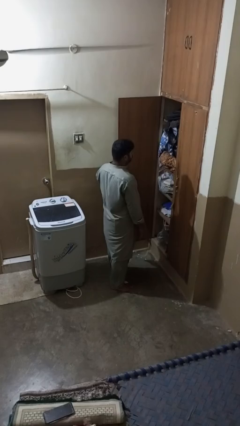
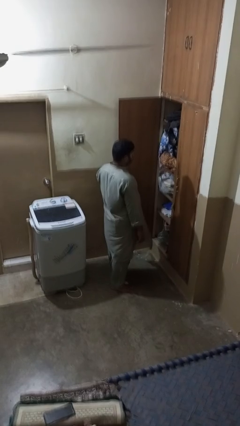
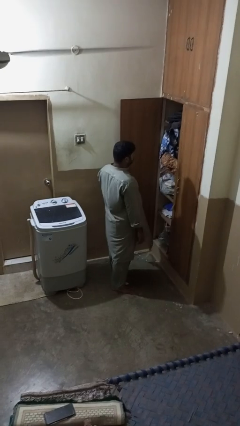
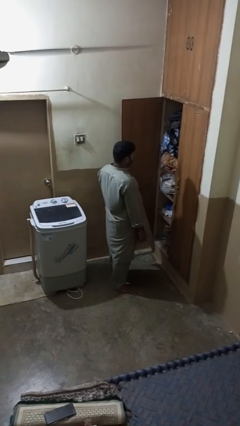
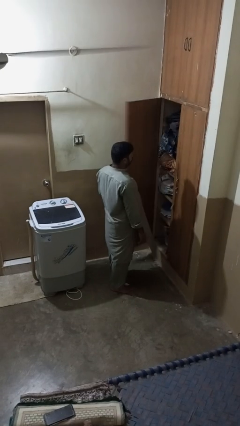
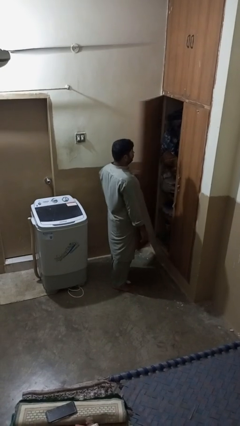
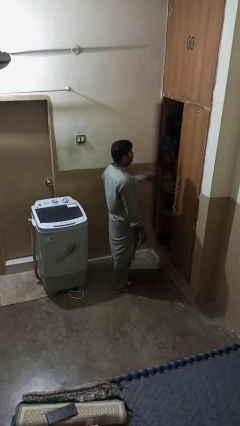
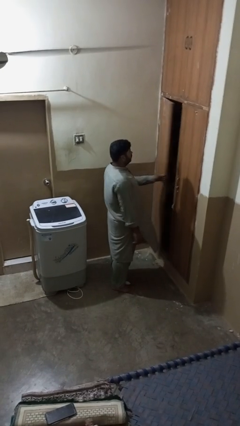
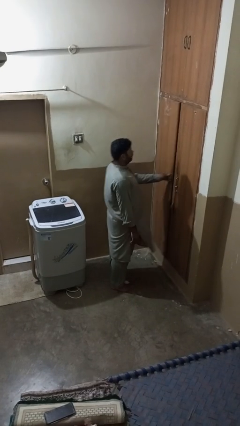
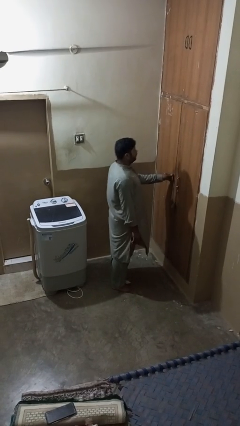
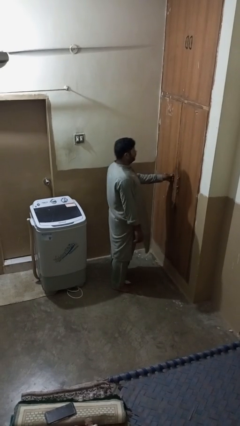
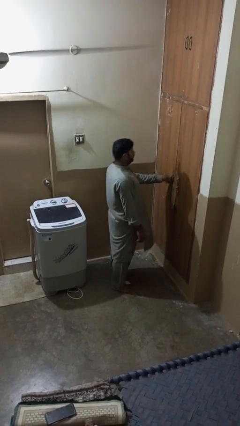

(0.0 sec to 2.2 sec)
person closes closet door

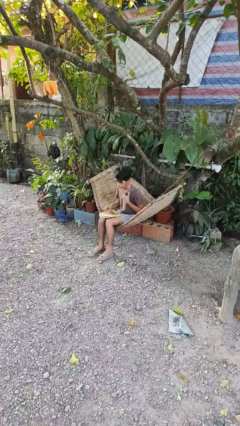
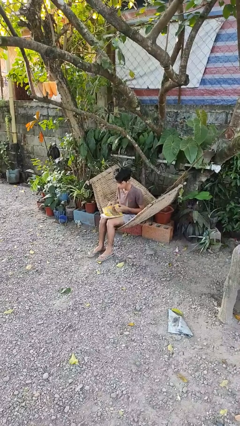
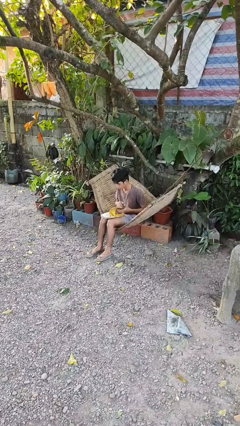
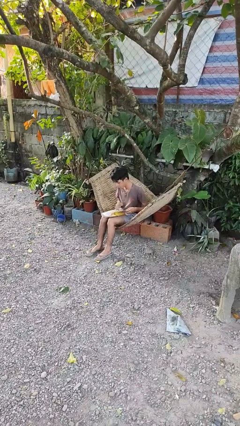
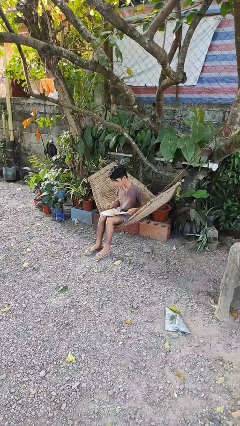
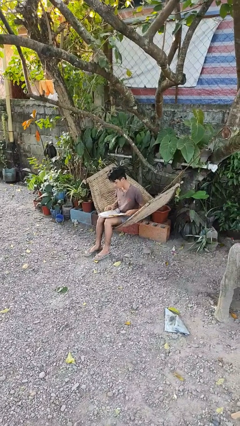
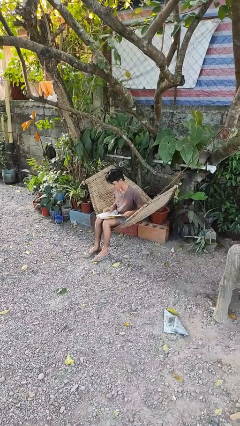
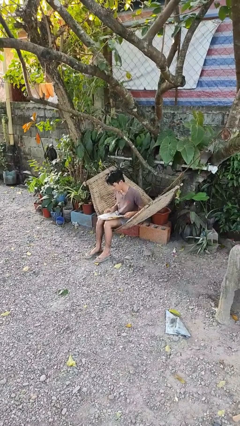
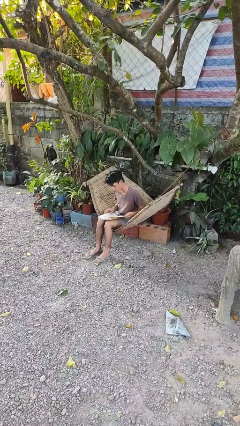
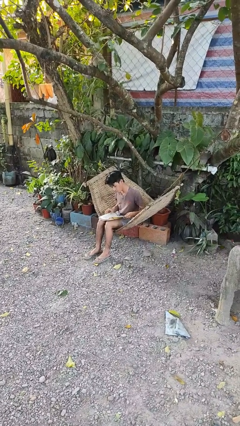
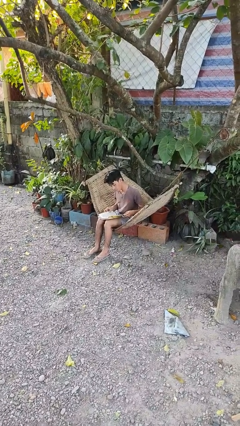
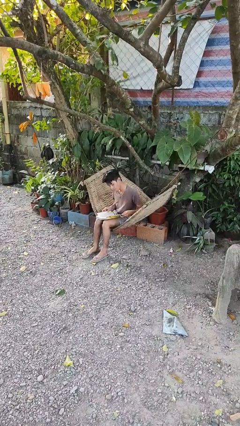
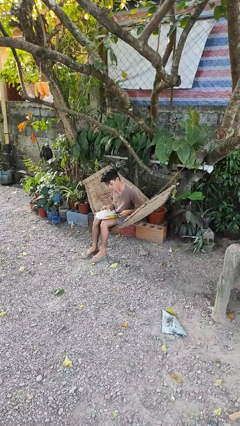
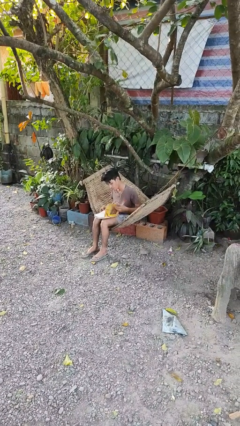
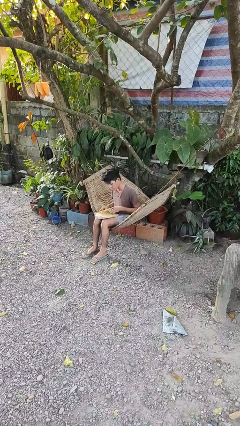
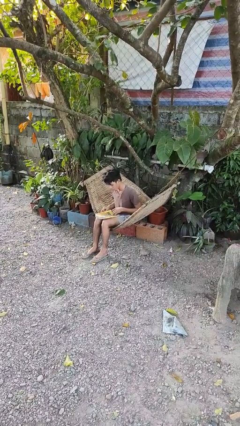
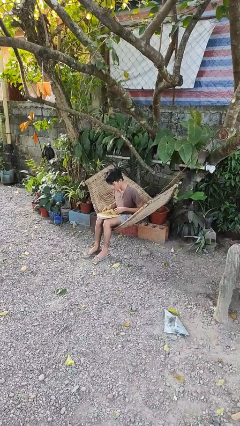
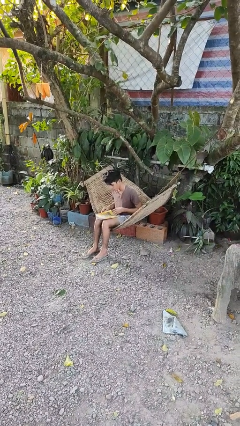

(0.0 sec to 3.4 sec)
person reads book

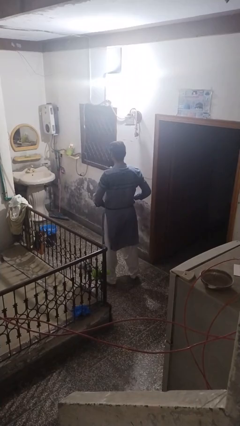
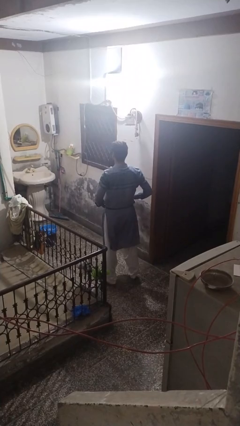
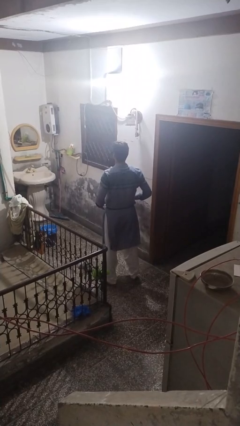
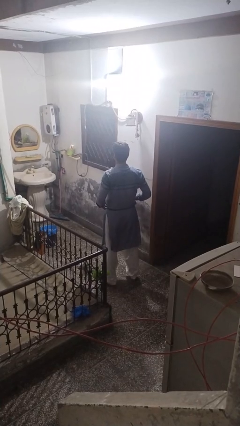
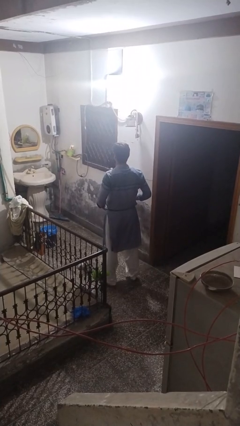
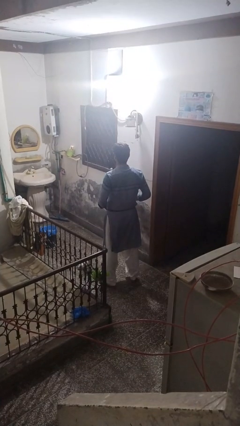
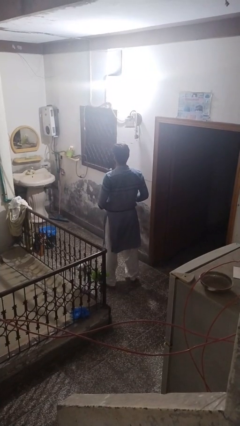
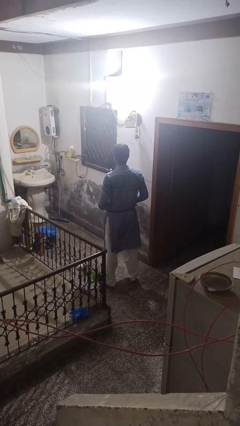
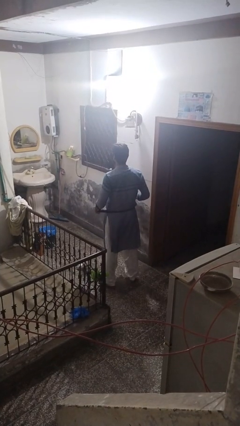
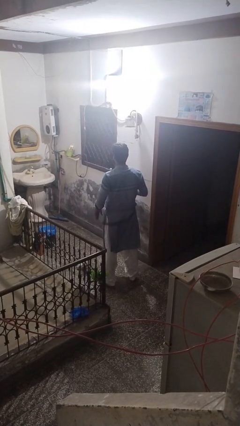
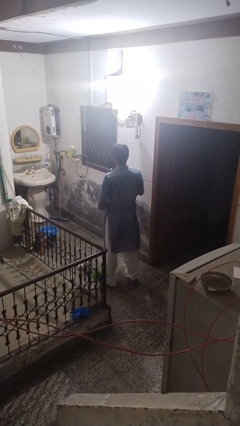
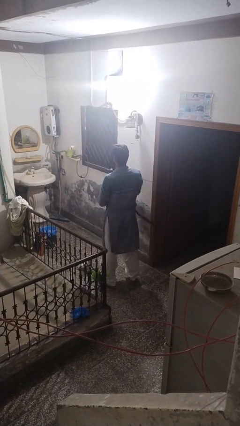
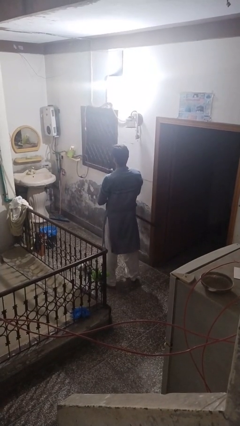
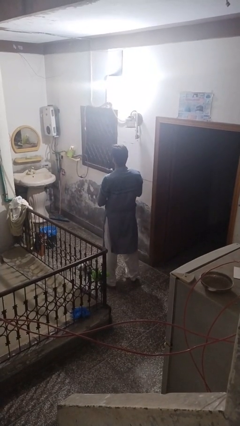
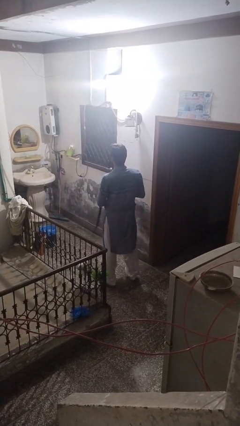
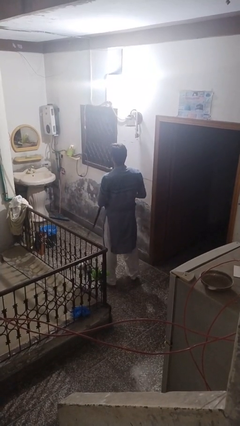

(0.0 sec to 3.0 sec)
person takes off belt

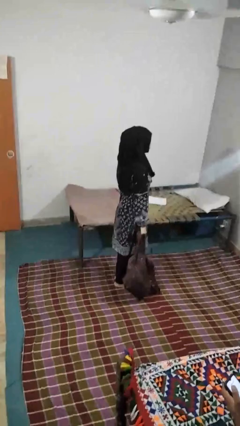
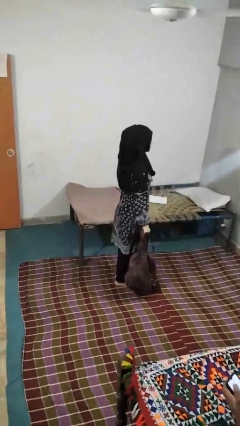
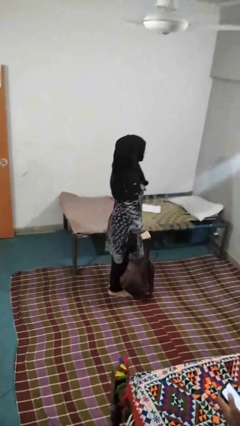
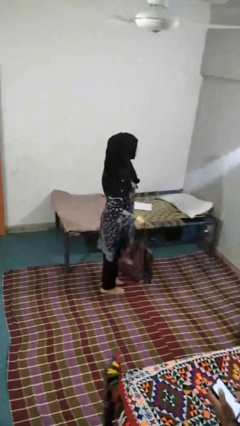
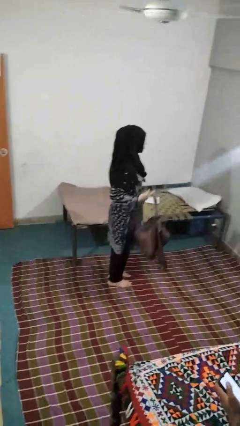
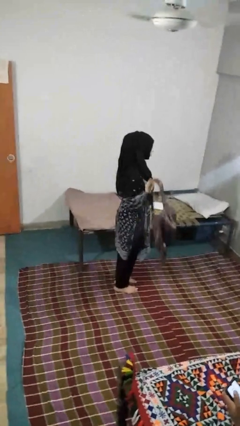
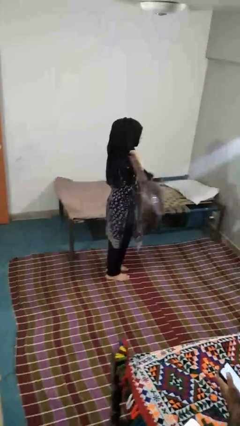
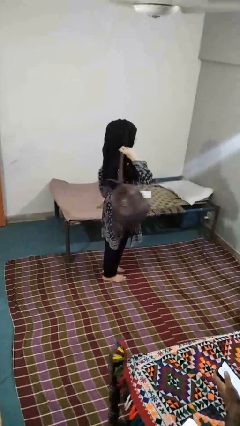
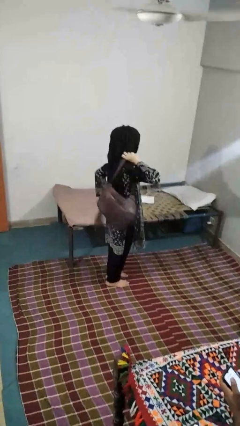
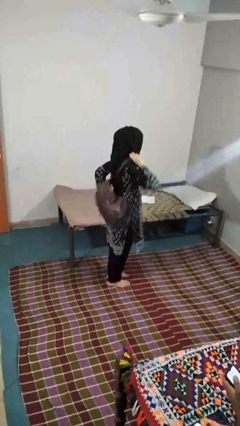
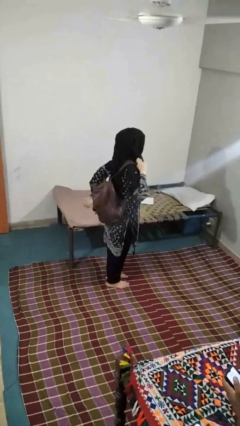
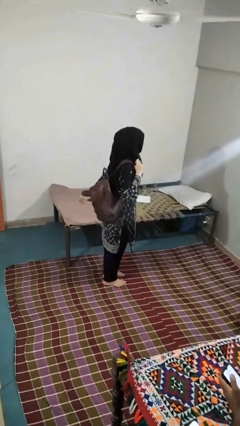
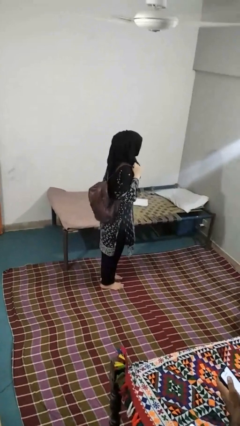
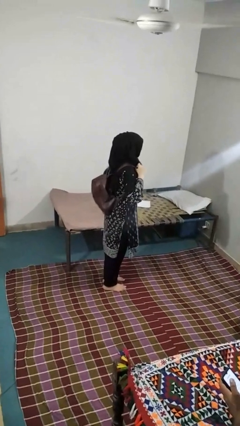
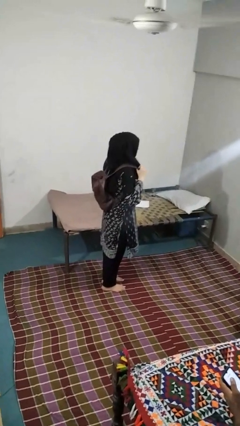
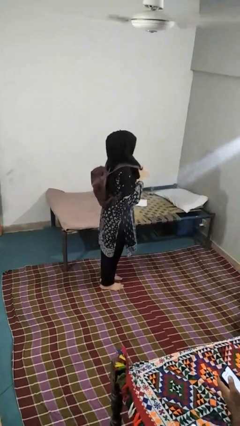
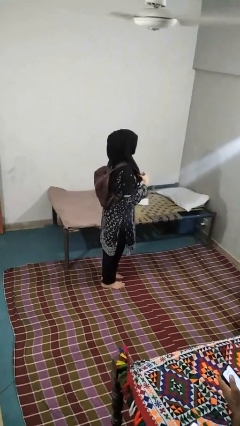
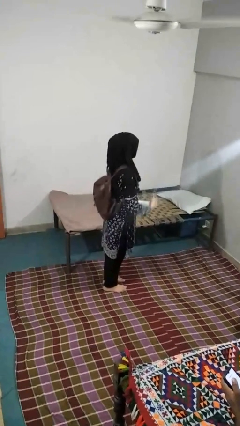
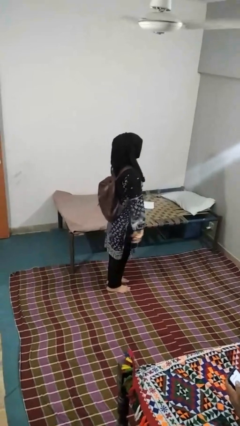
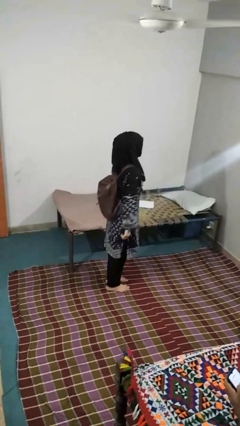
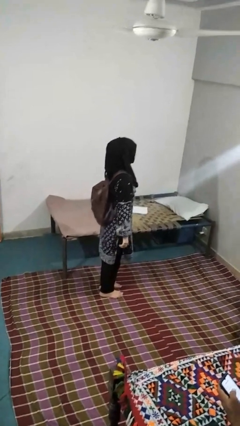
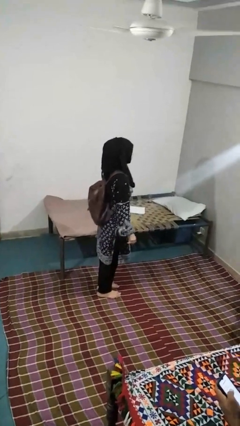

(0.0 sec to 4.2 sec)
person puts on backpack

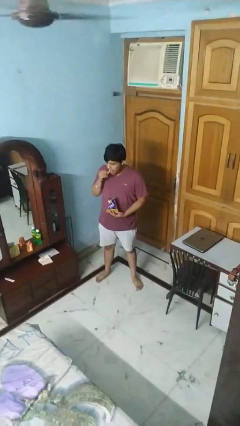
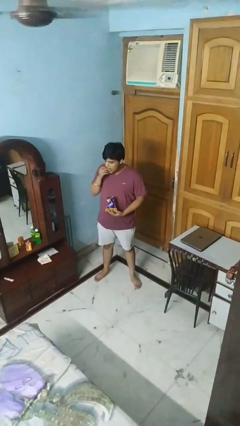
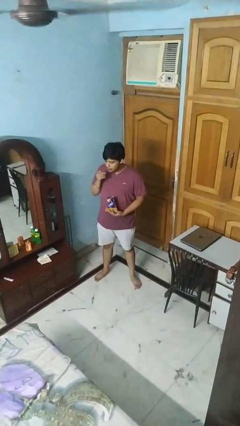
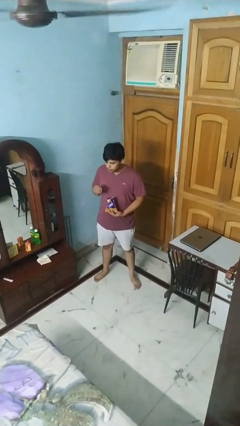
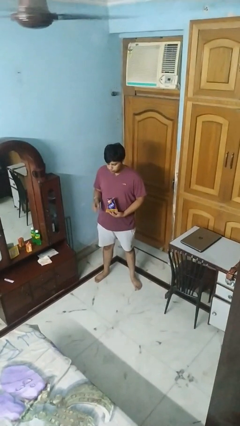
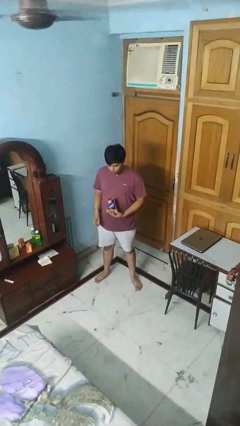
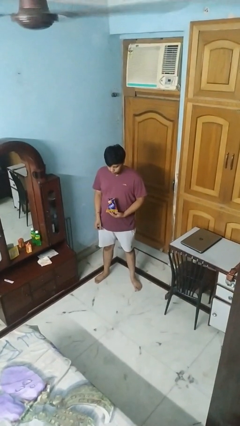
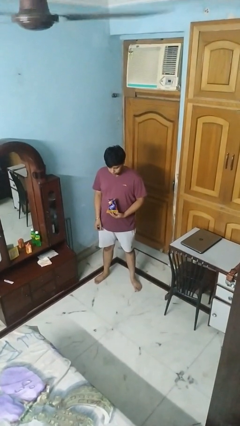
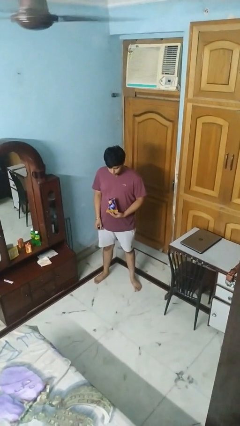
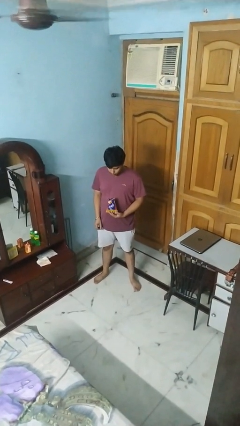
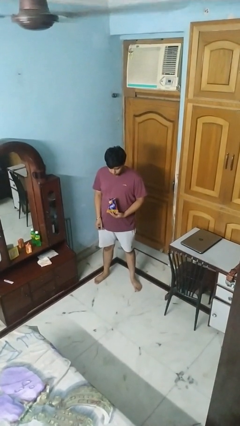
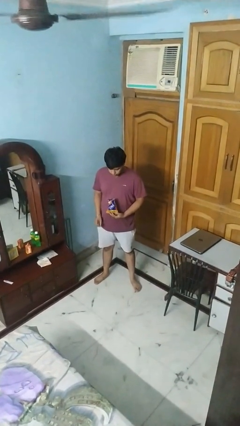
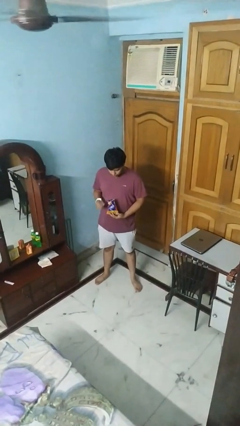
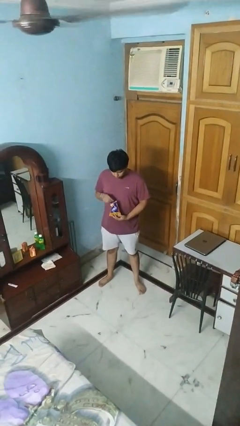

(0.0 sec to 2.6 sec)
person eats snack from bag

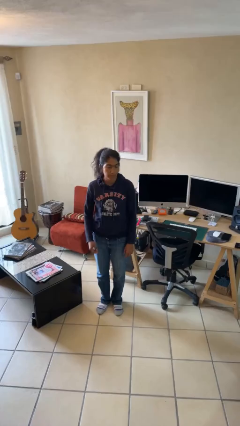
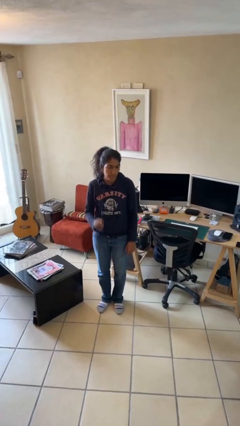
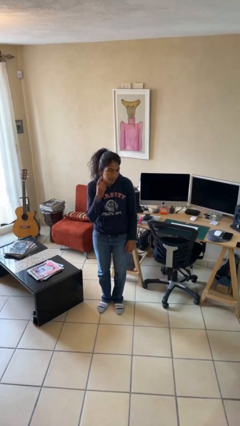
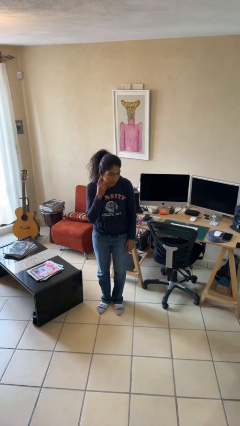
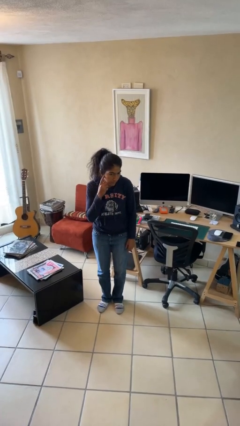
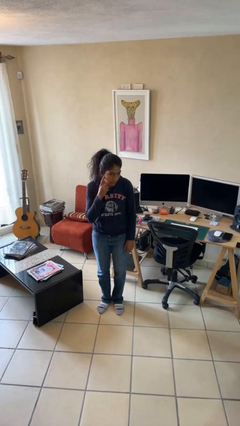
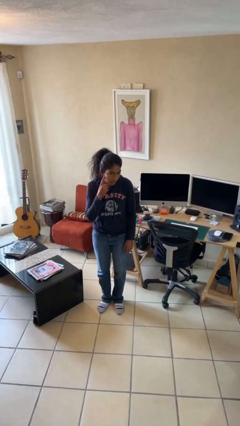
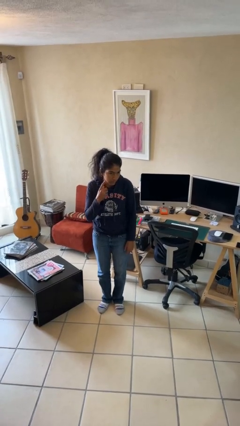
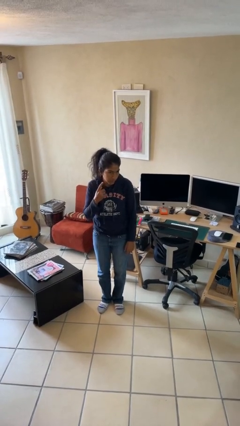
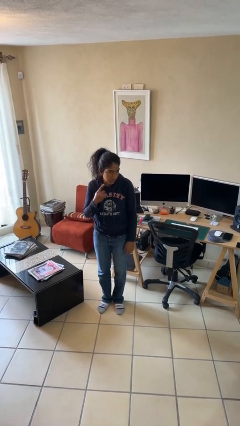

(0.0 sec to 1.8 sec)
person gestures listen closely

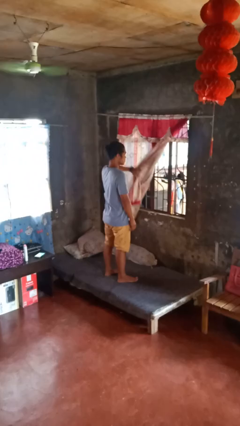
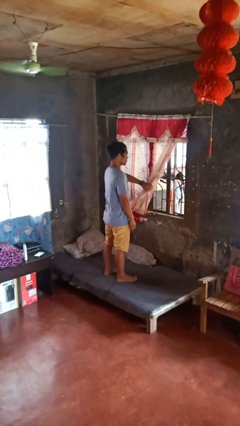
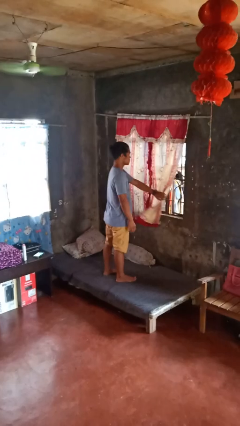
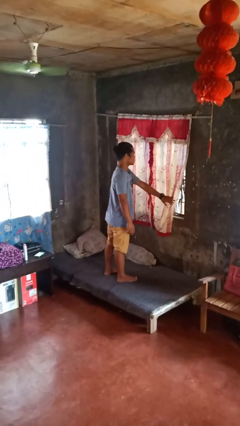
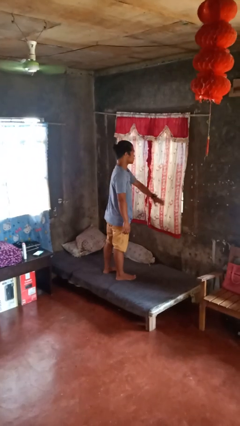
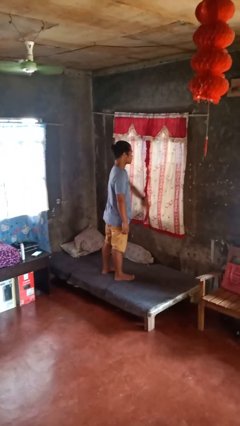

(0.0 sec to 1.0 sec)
person closes curtains
